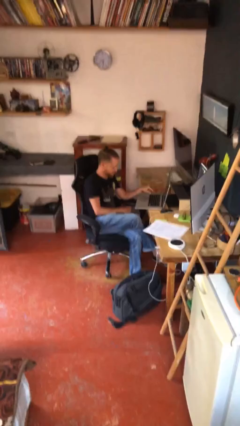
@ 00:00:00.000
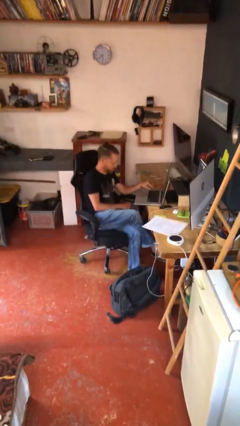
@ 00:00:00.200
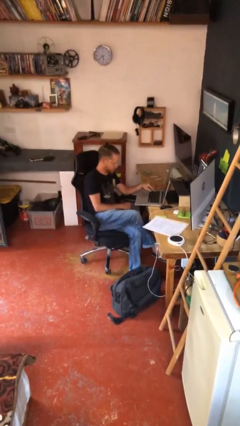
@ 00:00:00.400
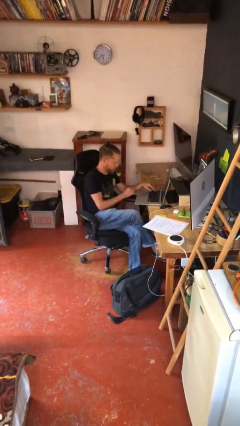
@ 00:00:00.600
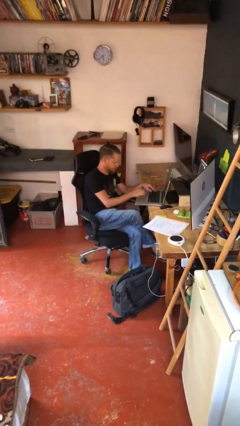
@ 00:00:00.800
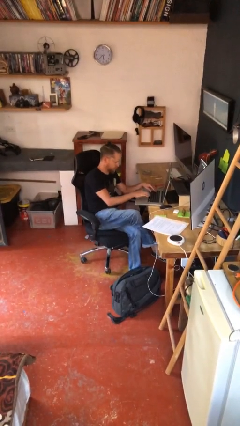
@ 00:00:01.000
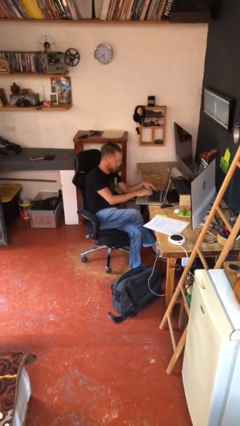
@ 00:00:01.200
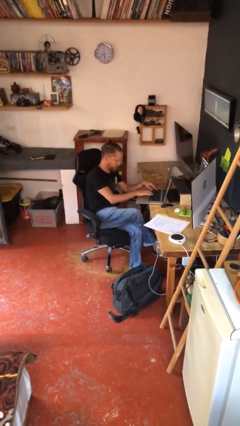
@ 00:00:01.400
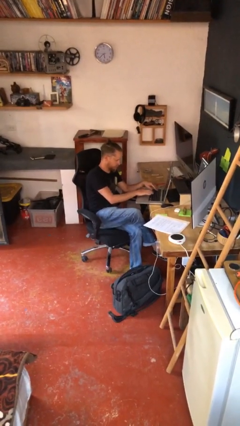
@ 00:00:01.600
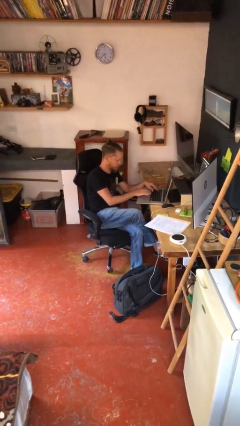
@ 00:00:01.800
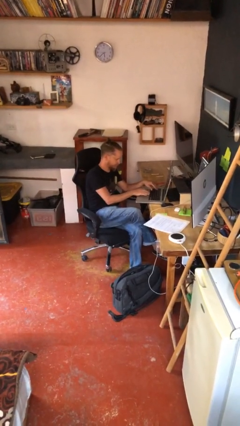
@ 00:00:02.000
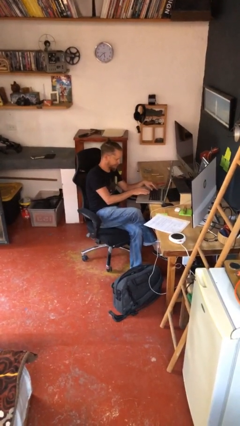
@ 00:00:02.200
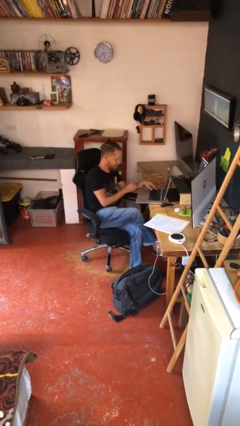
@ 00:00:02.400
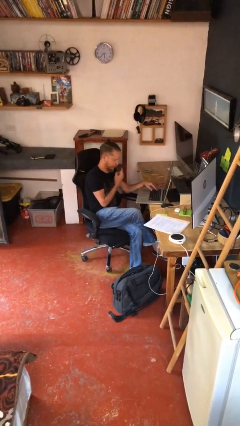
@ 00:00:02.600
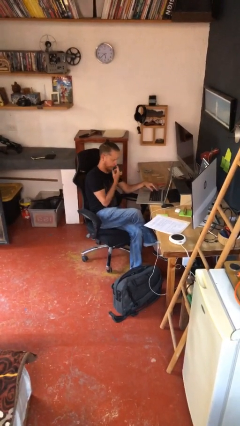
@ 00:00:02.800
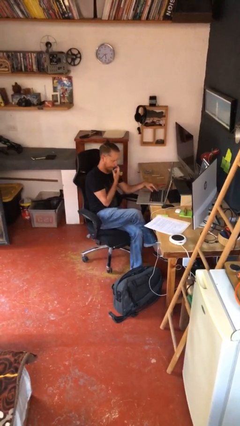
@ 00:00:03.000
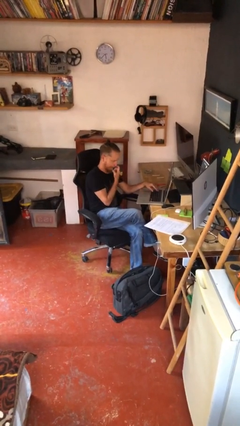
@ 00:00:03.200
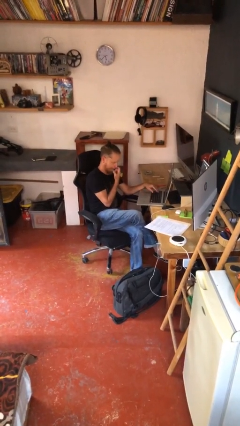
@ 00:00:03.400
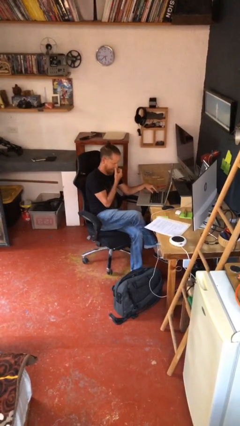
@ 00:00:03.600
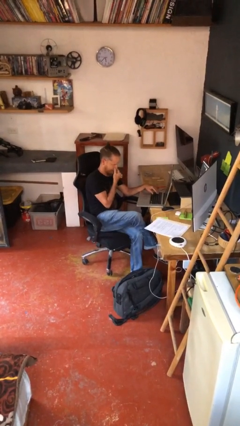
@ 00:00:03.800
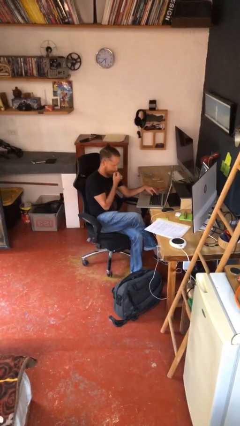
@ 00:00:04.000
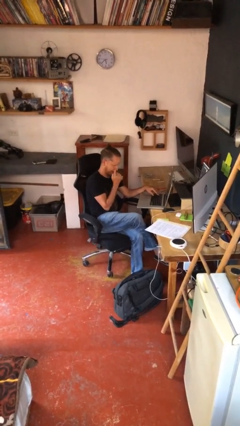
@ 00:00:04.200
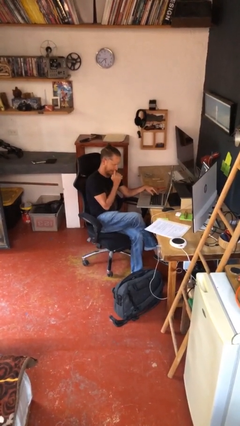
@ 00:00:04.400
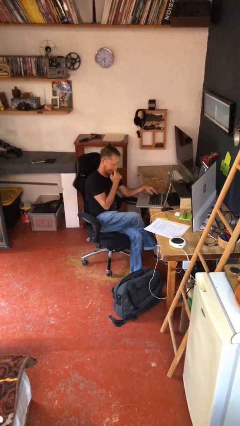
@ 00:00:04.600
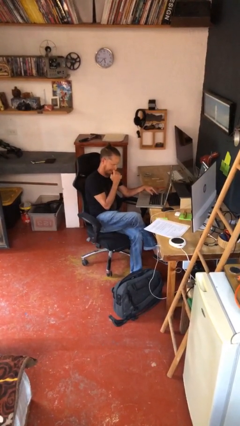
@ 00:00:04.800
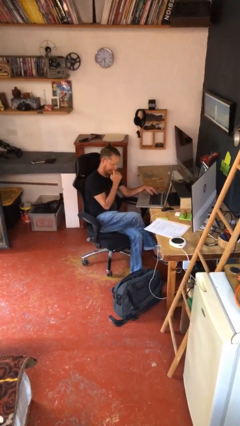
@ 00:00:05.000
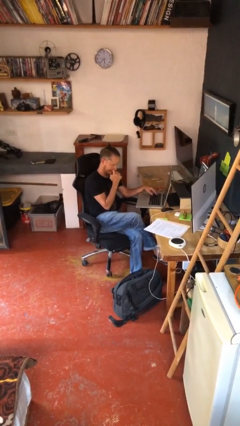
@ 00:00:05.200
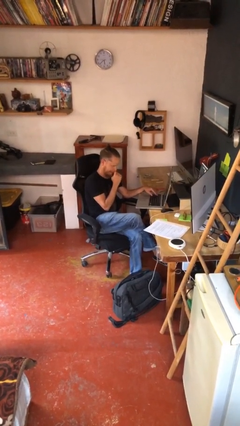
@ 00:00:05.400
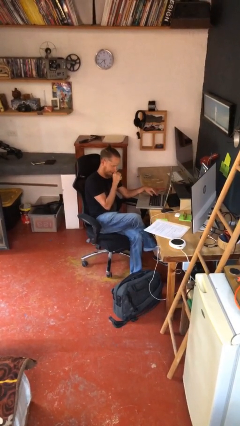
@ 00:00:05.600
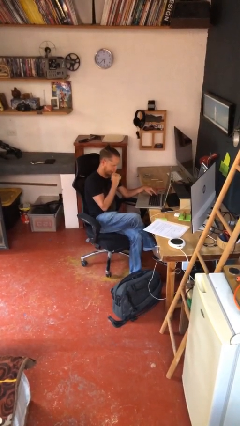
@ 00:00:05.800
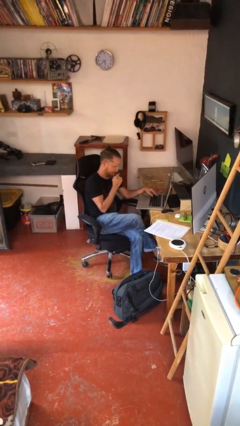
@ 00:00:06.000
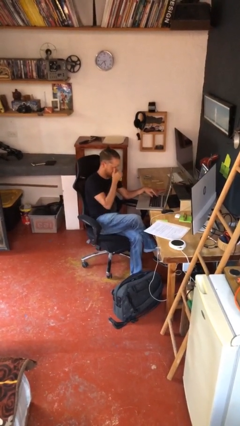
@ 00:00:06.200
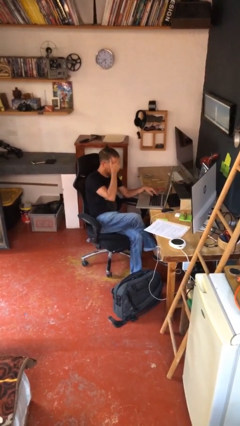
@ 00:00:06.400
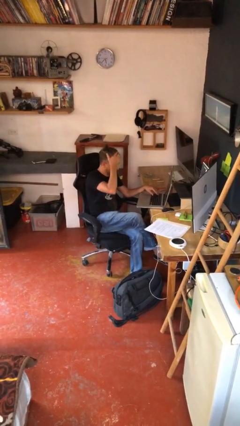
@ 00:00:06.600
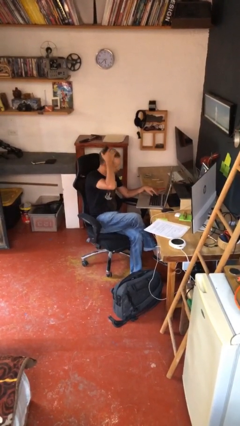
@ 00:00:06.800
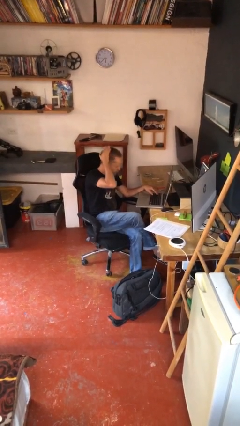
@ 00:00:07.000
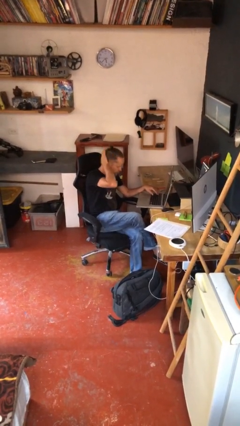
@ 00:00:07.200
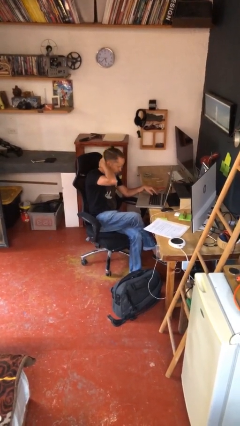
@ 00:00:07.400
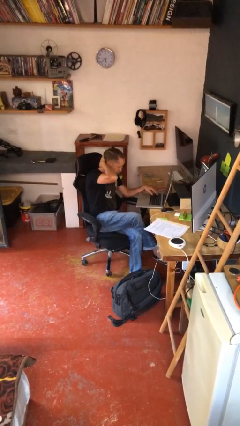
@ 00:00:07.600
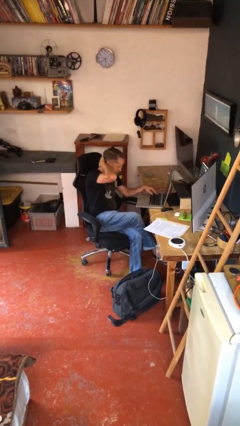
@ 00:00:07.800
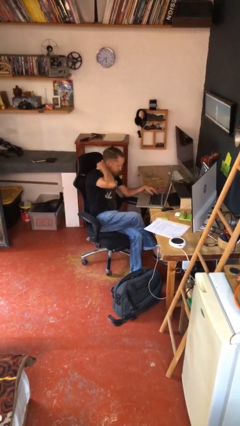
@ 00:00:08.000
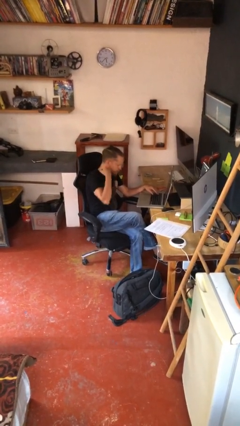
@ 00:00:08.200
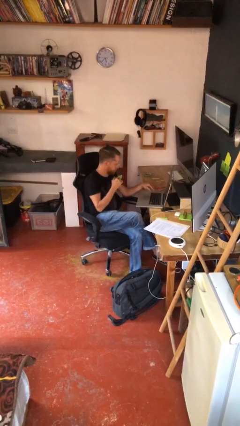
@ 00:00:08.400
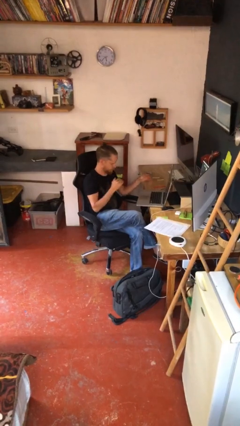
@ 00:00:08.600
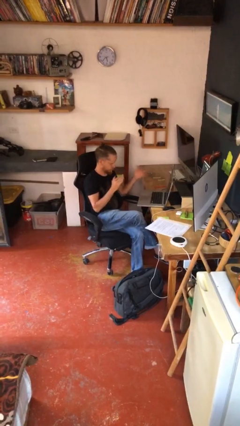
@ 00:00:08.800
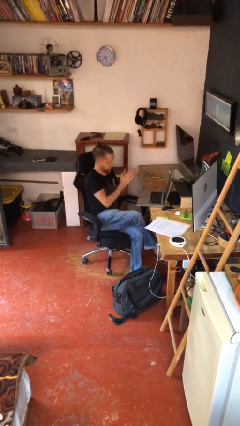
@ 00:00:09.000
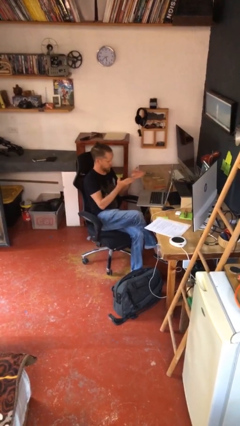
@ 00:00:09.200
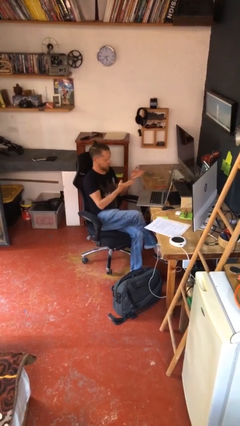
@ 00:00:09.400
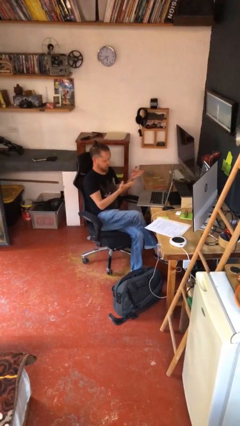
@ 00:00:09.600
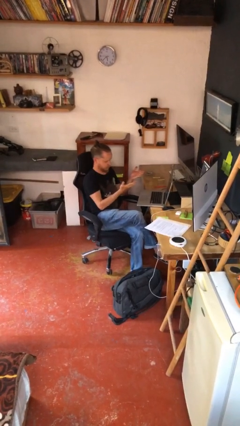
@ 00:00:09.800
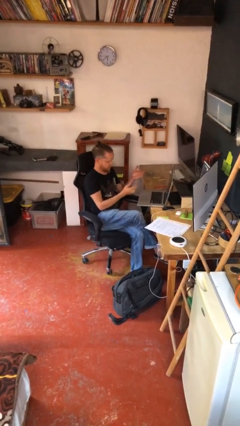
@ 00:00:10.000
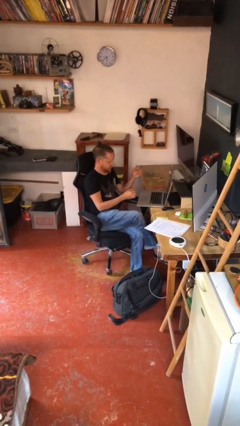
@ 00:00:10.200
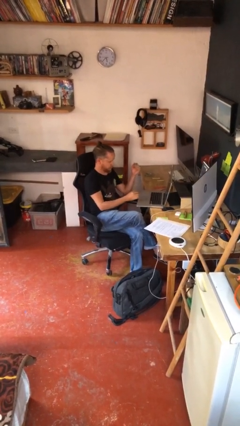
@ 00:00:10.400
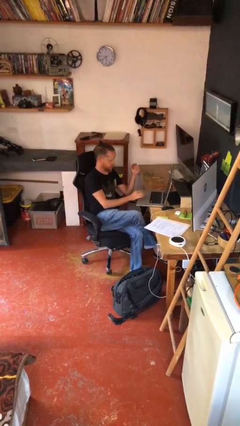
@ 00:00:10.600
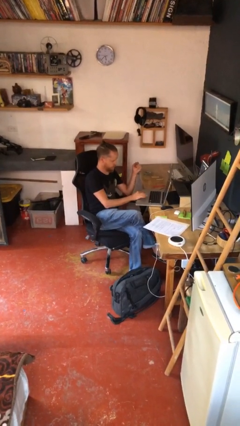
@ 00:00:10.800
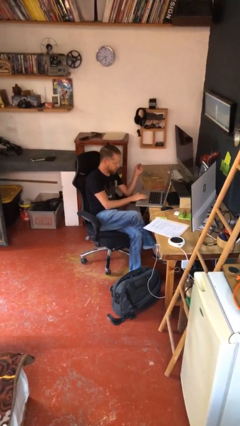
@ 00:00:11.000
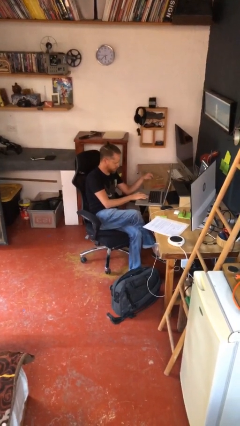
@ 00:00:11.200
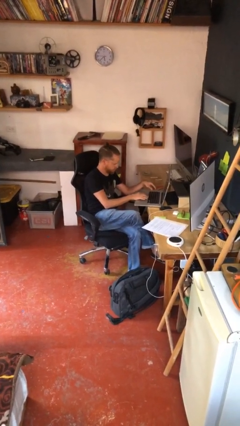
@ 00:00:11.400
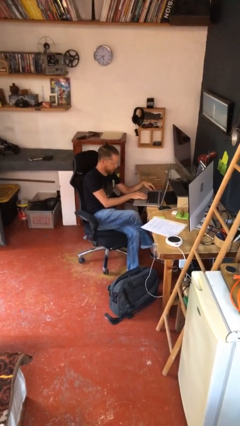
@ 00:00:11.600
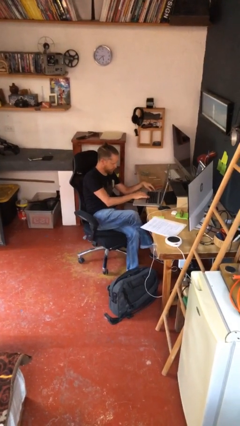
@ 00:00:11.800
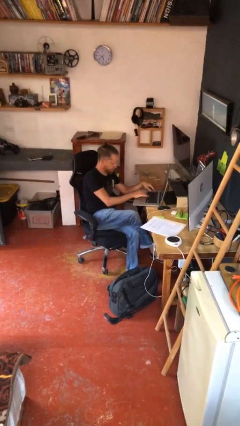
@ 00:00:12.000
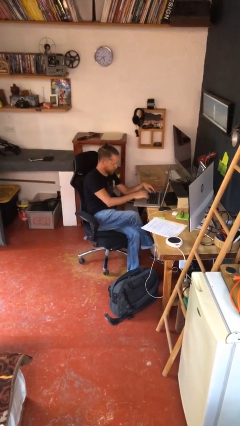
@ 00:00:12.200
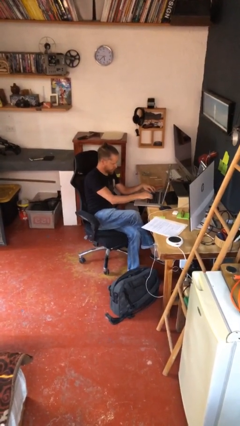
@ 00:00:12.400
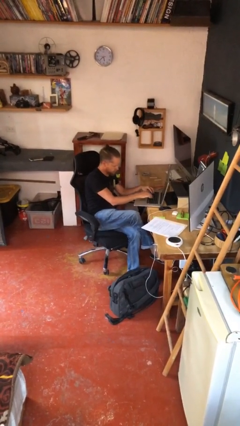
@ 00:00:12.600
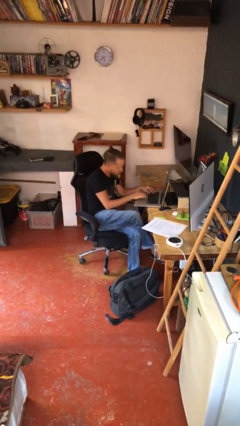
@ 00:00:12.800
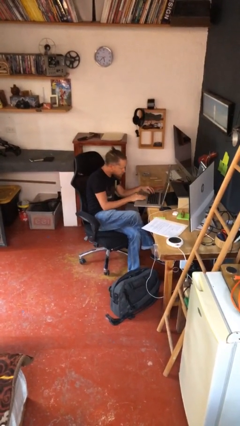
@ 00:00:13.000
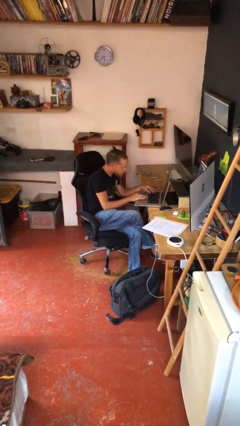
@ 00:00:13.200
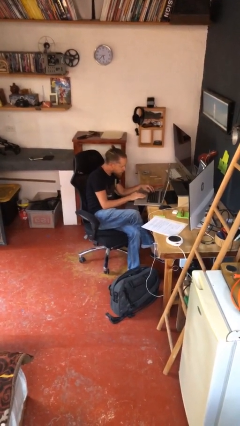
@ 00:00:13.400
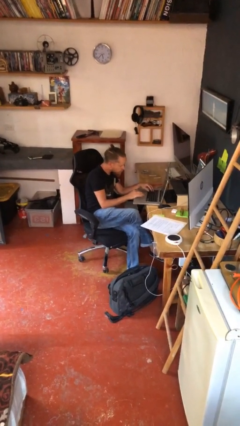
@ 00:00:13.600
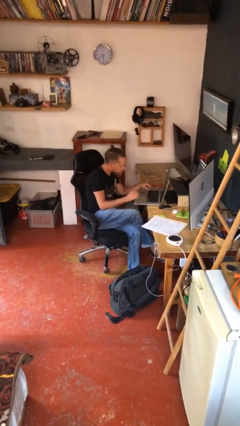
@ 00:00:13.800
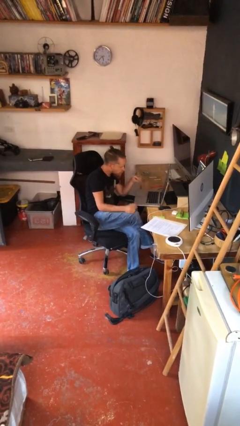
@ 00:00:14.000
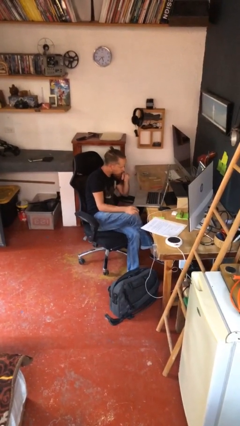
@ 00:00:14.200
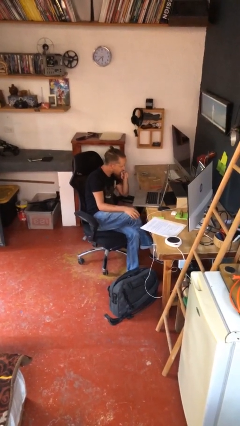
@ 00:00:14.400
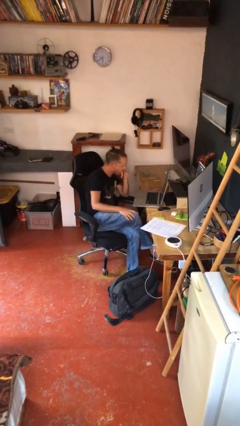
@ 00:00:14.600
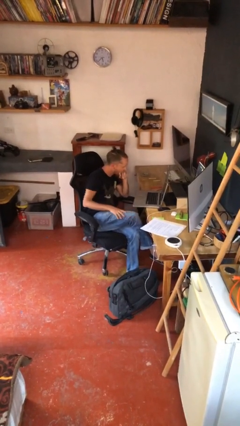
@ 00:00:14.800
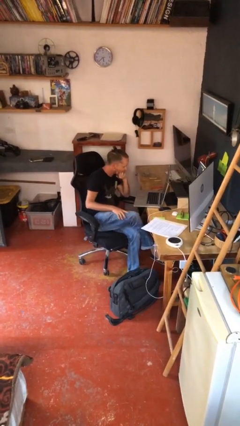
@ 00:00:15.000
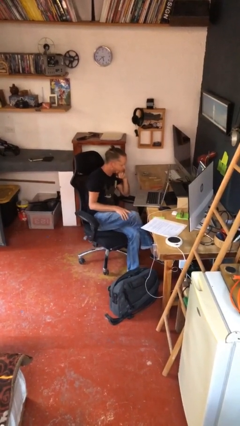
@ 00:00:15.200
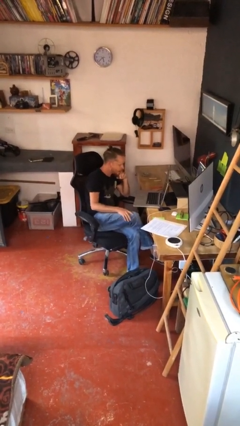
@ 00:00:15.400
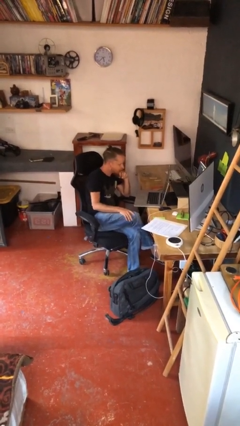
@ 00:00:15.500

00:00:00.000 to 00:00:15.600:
person interacts with laptop

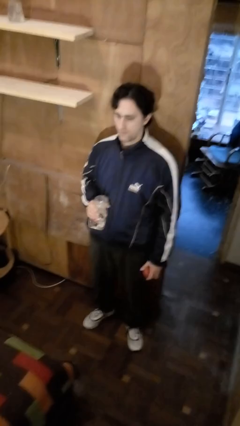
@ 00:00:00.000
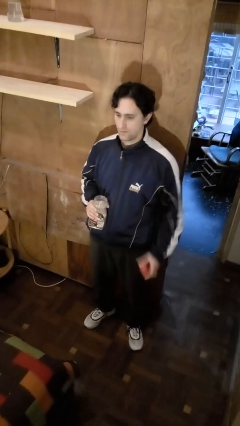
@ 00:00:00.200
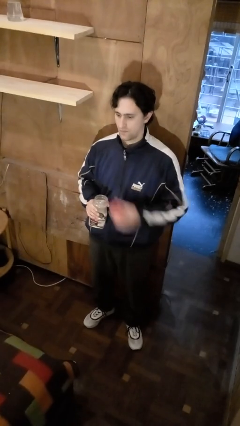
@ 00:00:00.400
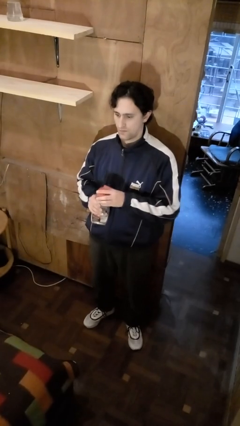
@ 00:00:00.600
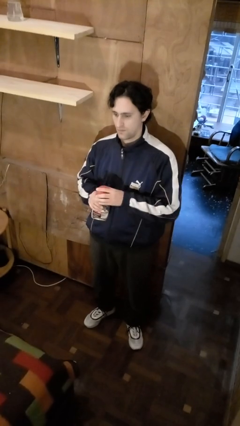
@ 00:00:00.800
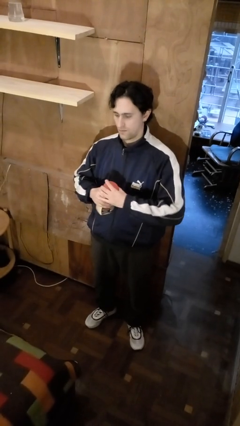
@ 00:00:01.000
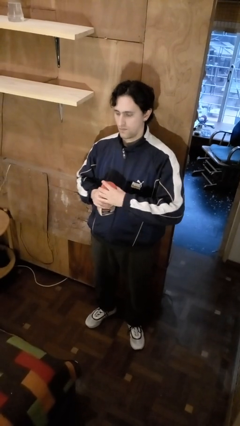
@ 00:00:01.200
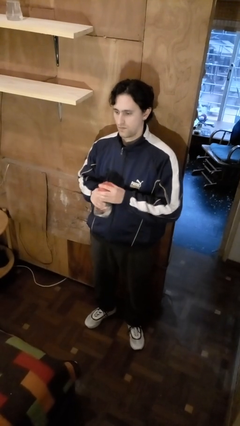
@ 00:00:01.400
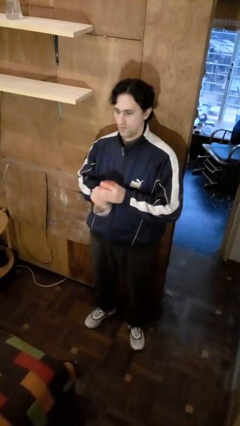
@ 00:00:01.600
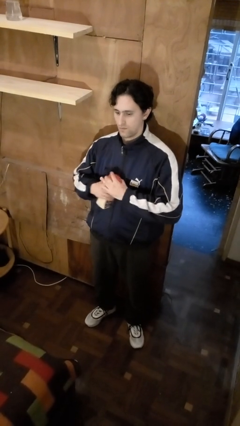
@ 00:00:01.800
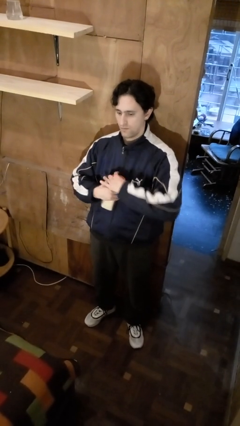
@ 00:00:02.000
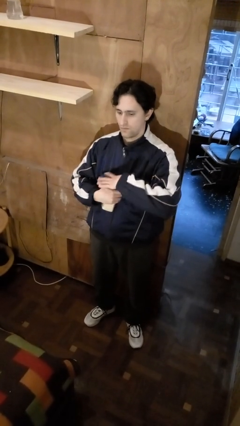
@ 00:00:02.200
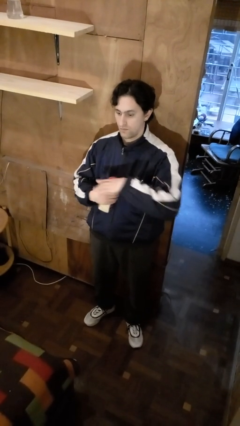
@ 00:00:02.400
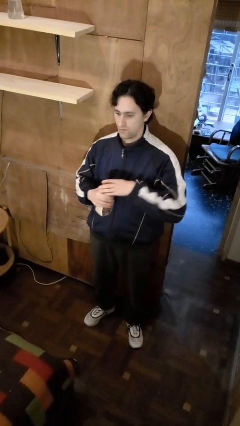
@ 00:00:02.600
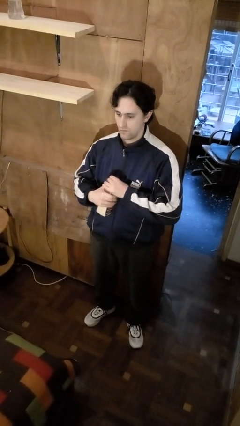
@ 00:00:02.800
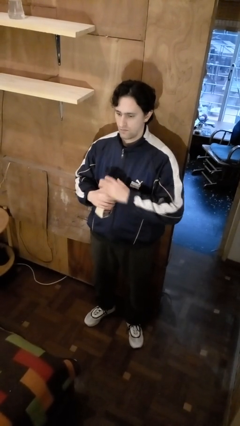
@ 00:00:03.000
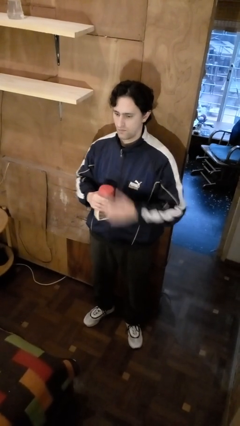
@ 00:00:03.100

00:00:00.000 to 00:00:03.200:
person closes jar
